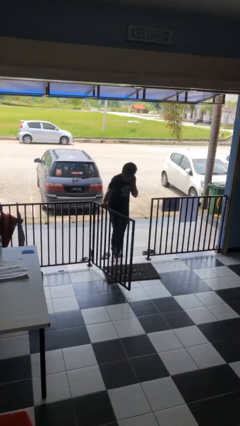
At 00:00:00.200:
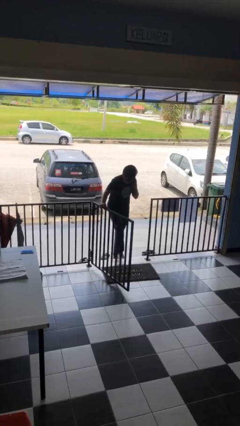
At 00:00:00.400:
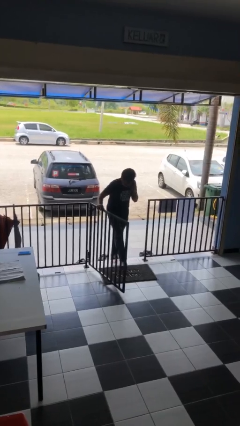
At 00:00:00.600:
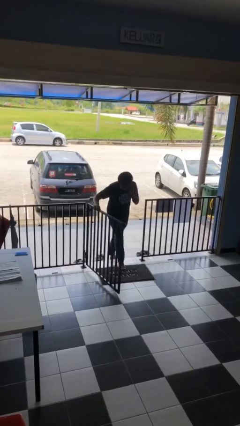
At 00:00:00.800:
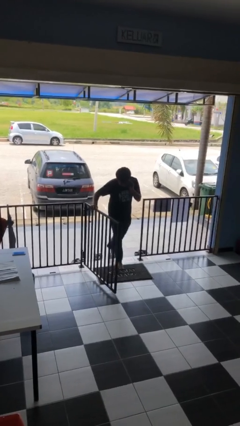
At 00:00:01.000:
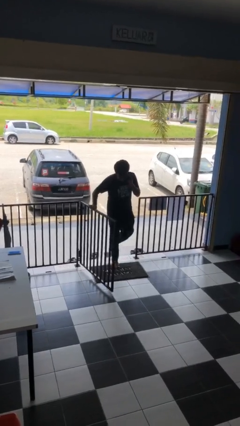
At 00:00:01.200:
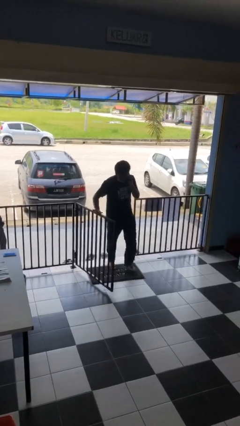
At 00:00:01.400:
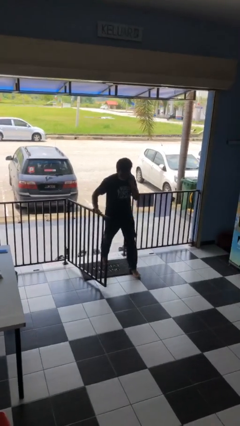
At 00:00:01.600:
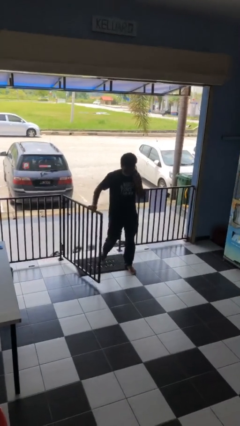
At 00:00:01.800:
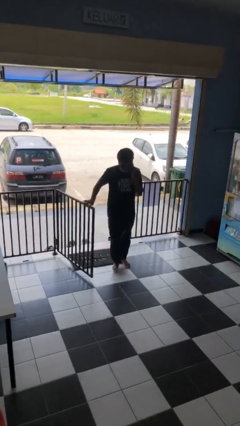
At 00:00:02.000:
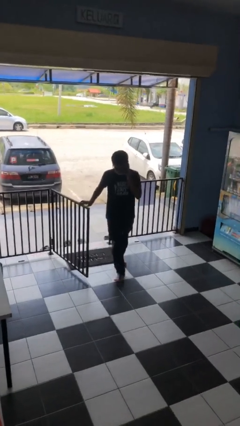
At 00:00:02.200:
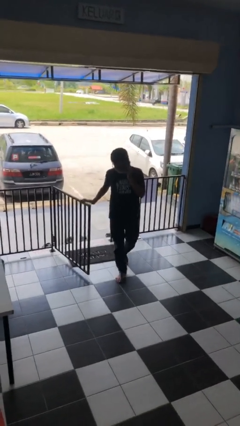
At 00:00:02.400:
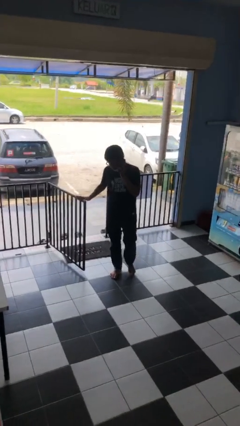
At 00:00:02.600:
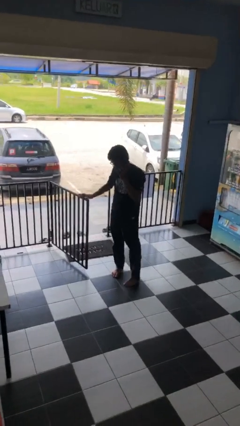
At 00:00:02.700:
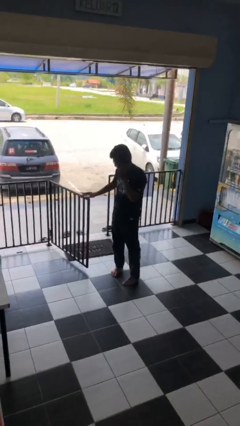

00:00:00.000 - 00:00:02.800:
person enters scene through structure

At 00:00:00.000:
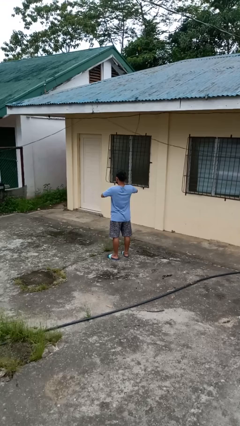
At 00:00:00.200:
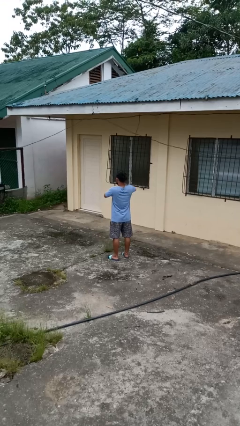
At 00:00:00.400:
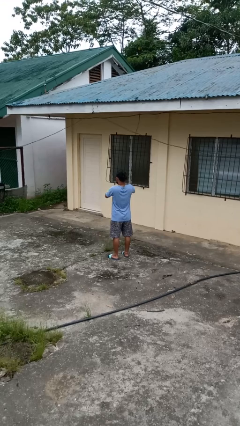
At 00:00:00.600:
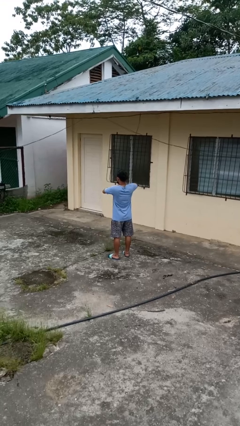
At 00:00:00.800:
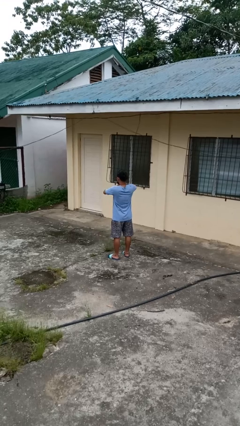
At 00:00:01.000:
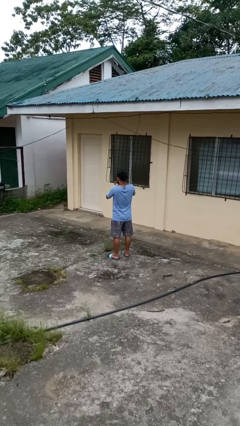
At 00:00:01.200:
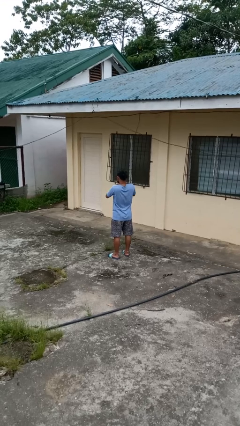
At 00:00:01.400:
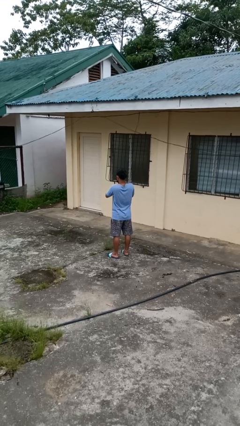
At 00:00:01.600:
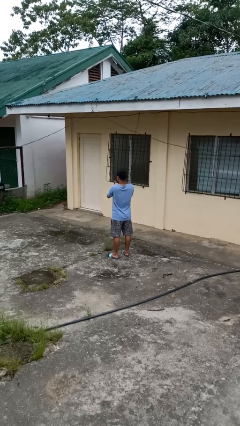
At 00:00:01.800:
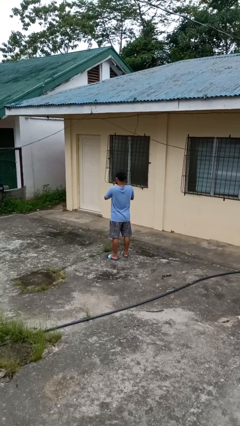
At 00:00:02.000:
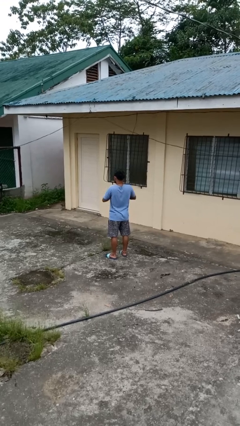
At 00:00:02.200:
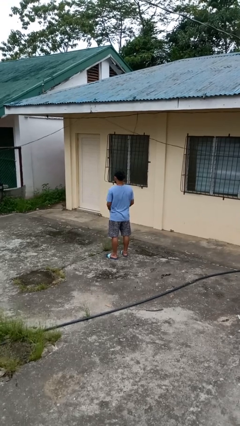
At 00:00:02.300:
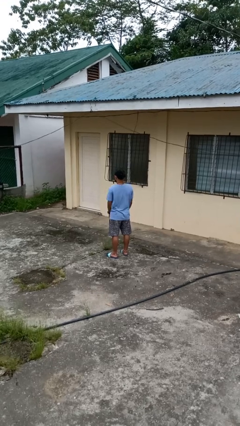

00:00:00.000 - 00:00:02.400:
person cracks knuckles

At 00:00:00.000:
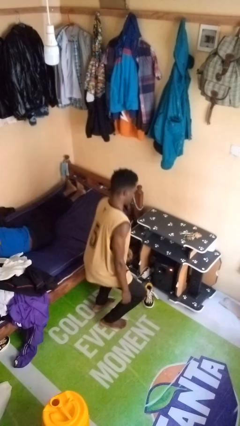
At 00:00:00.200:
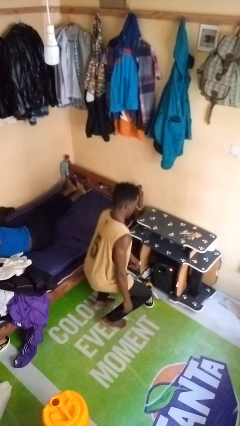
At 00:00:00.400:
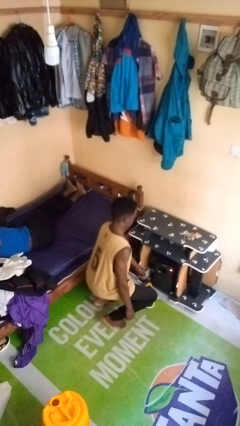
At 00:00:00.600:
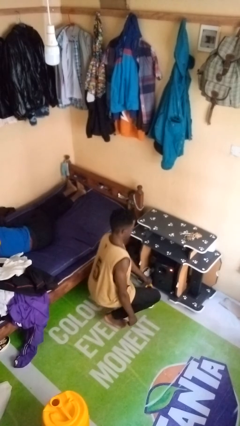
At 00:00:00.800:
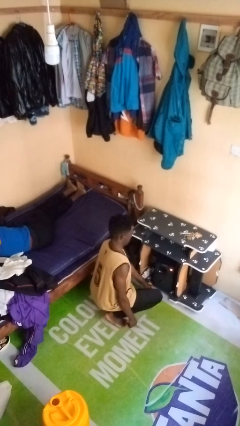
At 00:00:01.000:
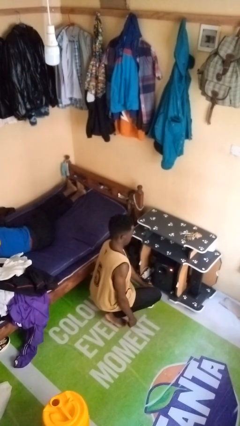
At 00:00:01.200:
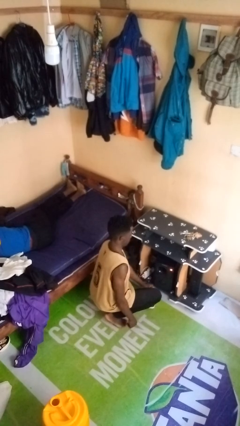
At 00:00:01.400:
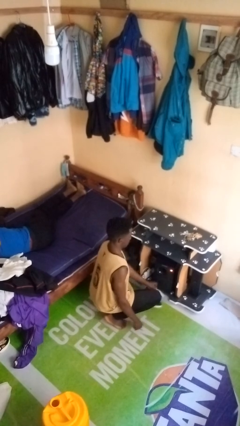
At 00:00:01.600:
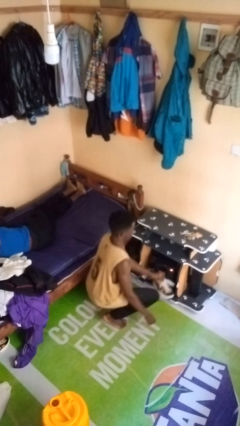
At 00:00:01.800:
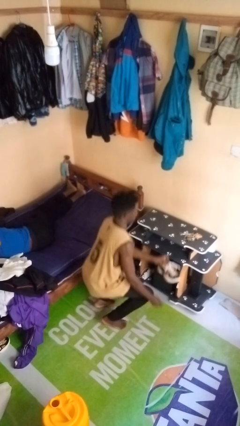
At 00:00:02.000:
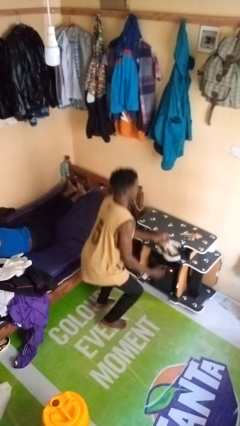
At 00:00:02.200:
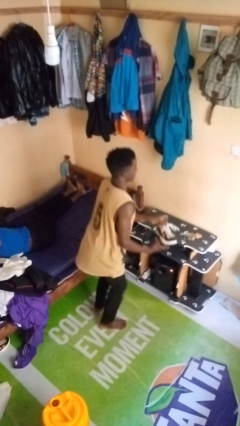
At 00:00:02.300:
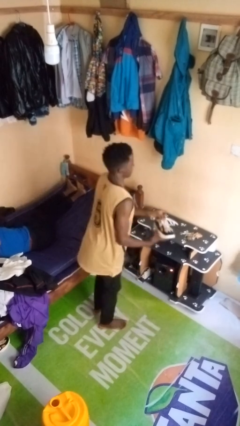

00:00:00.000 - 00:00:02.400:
person picks up object from floor

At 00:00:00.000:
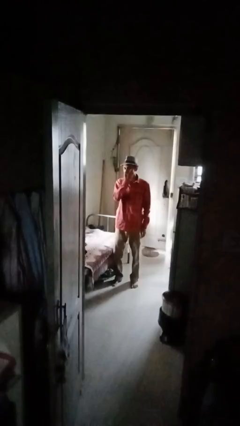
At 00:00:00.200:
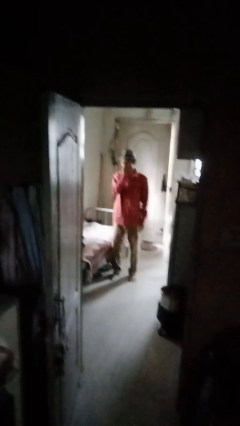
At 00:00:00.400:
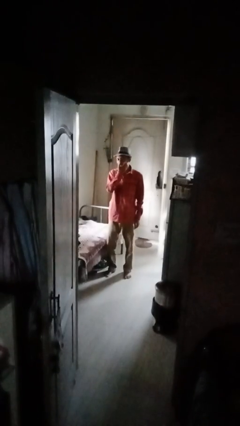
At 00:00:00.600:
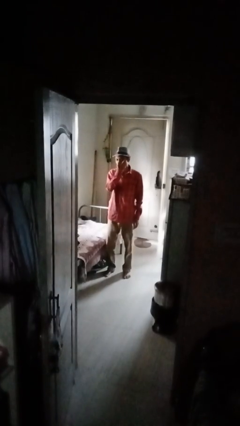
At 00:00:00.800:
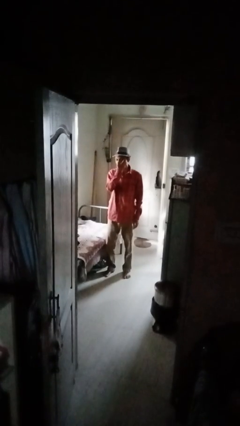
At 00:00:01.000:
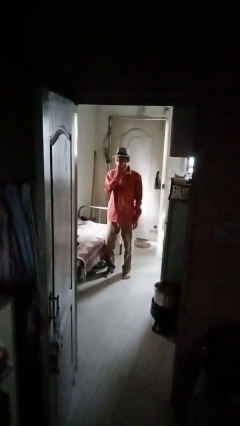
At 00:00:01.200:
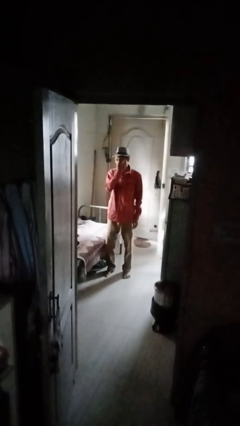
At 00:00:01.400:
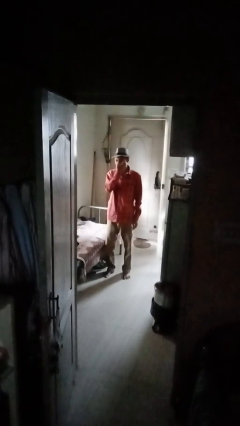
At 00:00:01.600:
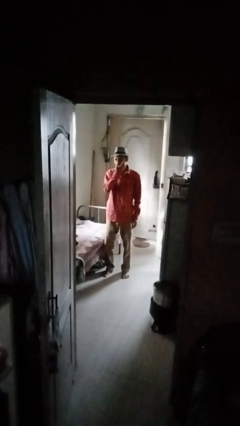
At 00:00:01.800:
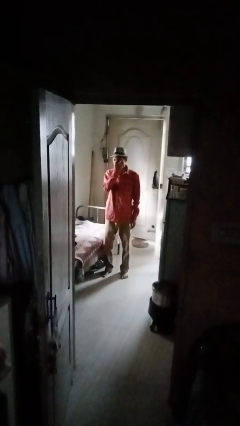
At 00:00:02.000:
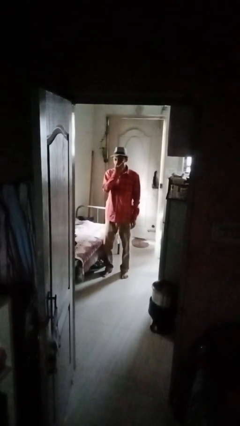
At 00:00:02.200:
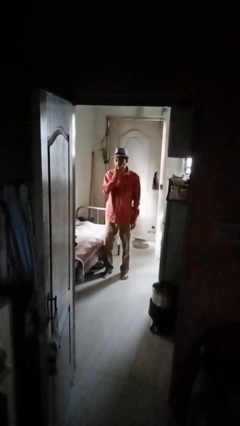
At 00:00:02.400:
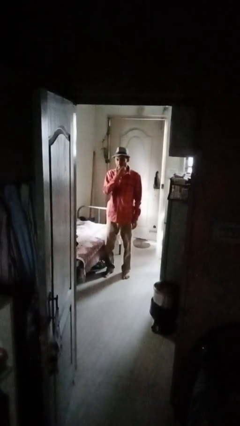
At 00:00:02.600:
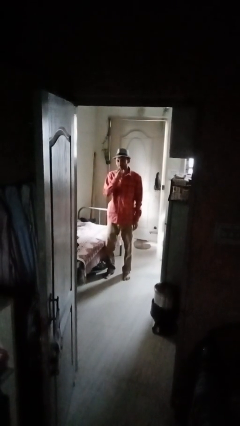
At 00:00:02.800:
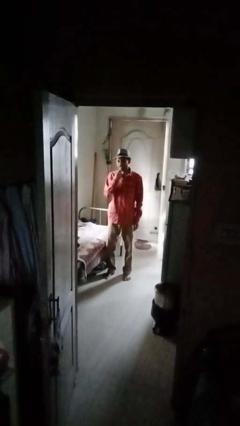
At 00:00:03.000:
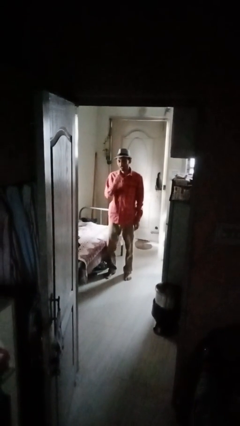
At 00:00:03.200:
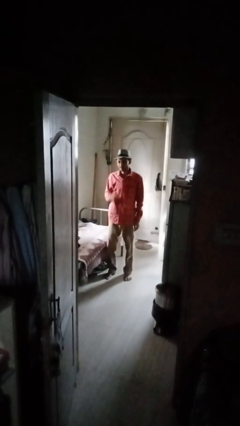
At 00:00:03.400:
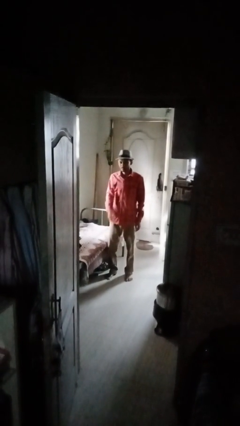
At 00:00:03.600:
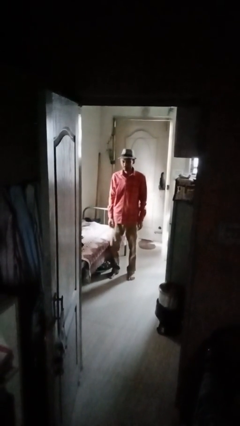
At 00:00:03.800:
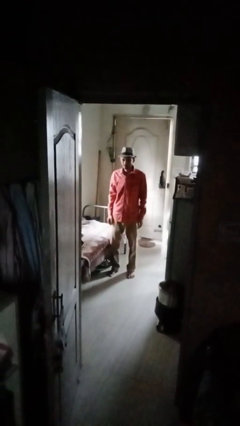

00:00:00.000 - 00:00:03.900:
person scratches face

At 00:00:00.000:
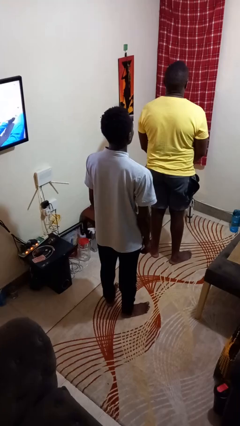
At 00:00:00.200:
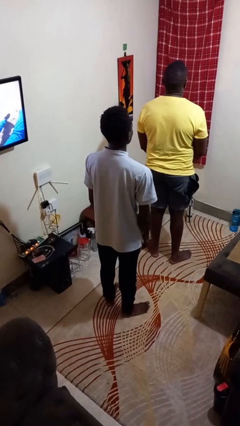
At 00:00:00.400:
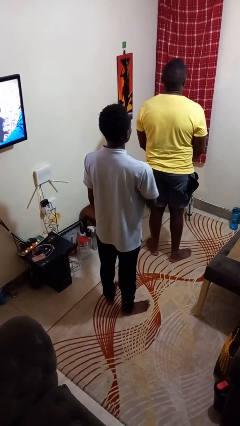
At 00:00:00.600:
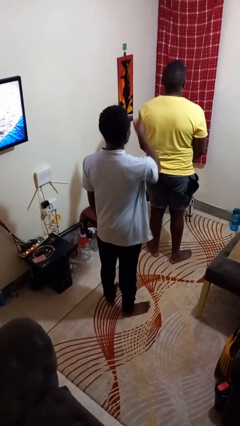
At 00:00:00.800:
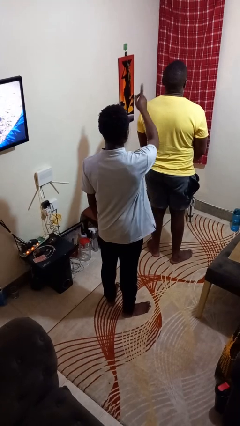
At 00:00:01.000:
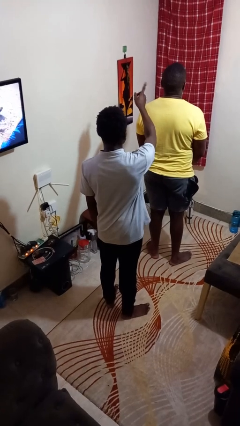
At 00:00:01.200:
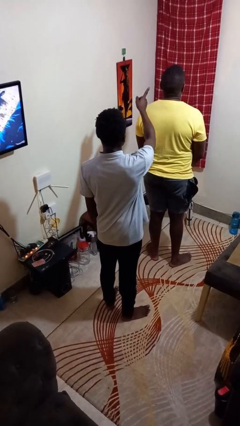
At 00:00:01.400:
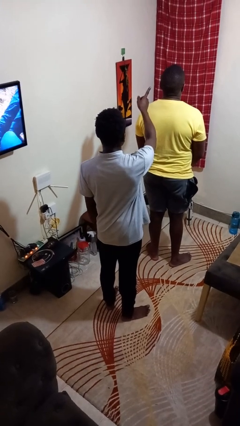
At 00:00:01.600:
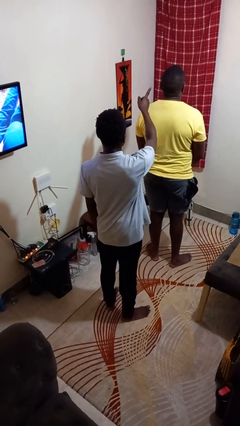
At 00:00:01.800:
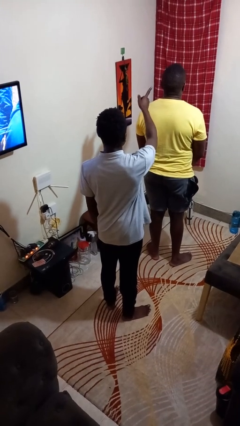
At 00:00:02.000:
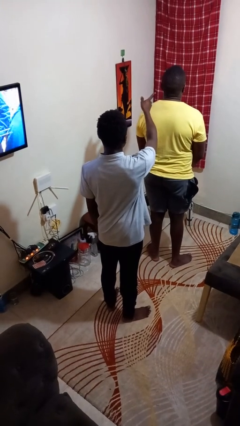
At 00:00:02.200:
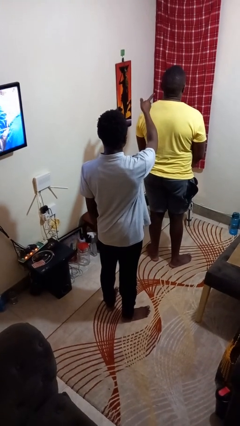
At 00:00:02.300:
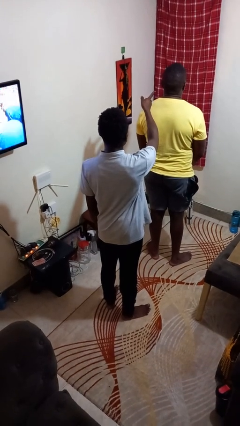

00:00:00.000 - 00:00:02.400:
person points at person

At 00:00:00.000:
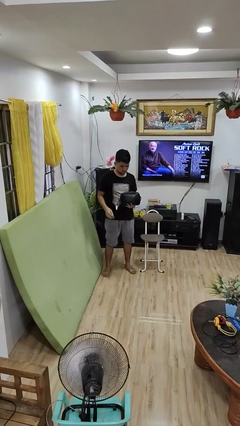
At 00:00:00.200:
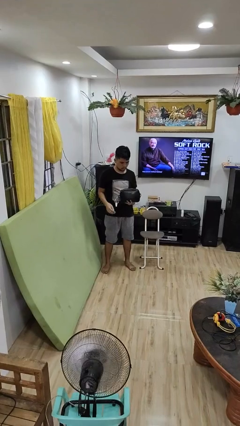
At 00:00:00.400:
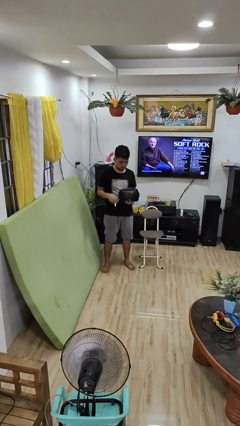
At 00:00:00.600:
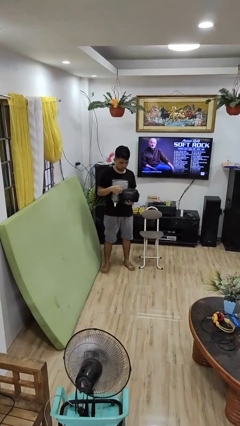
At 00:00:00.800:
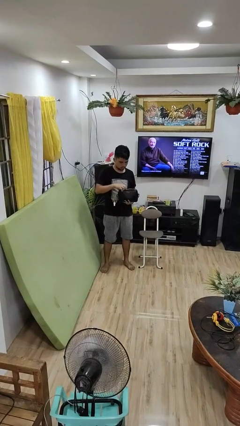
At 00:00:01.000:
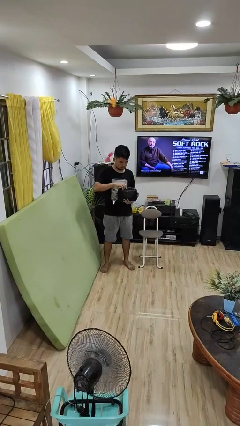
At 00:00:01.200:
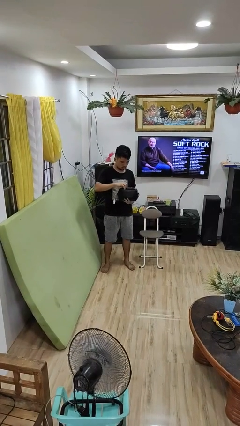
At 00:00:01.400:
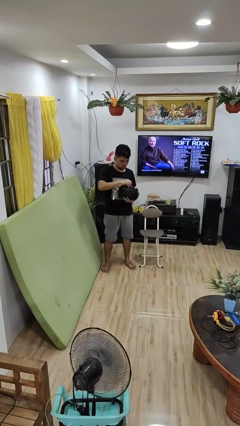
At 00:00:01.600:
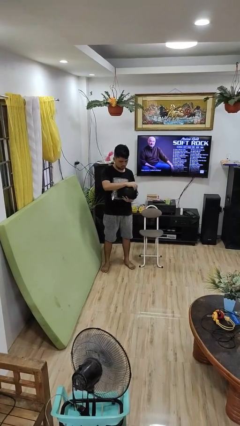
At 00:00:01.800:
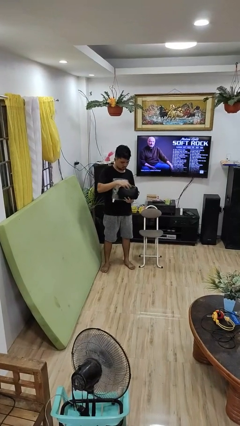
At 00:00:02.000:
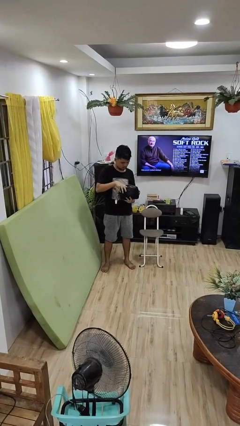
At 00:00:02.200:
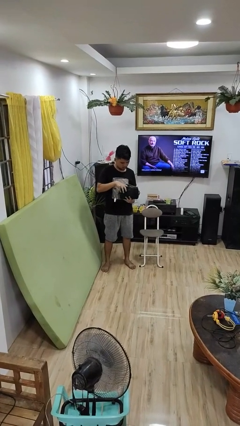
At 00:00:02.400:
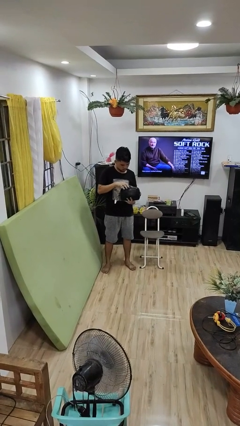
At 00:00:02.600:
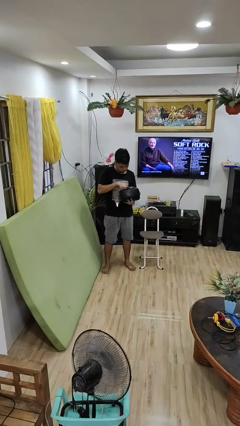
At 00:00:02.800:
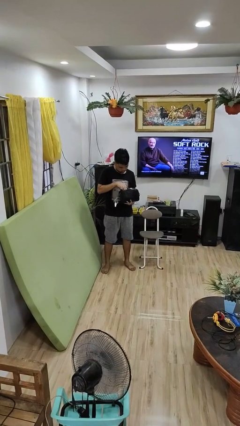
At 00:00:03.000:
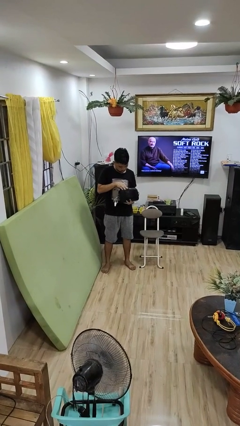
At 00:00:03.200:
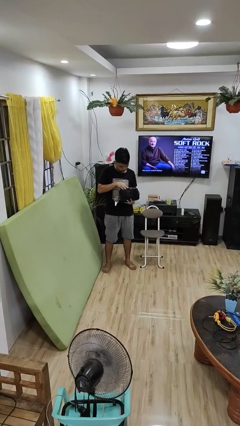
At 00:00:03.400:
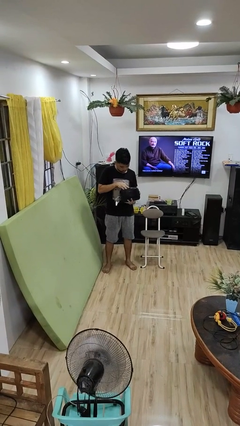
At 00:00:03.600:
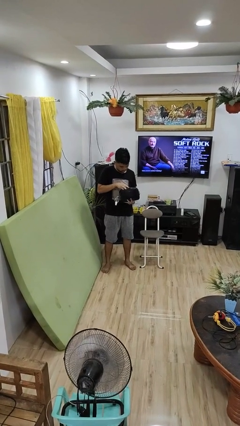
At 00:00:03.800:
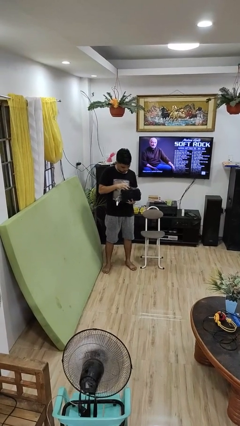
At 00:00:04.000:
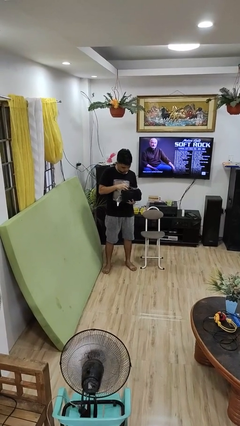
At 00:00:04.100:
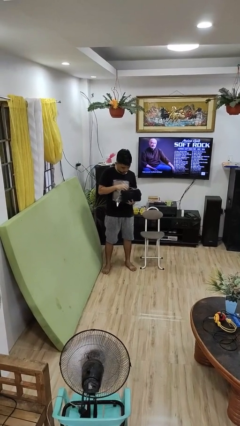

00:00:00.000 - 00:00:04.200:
person searches in purse
